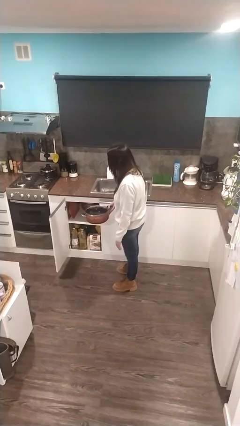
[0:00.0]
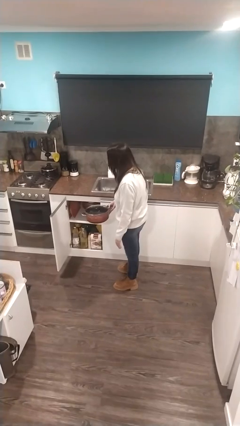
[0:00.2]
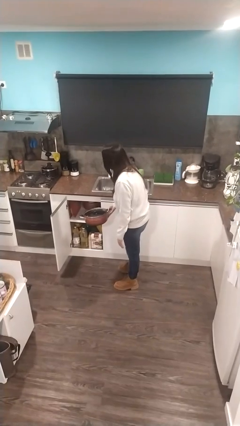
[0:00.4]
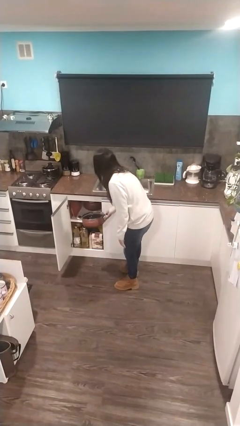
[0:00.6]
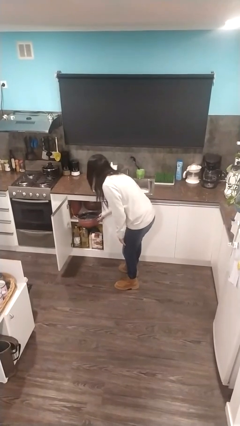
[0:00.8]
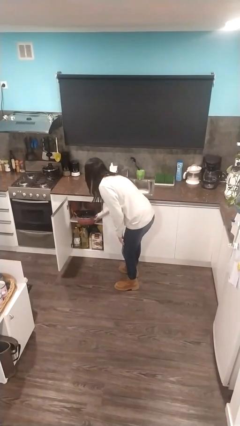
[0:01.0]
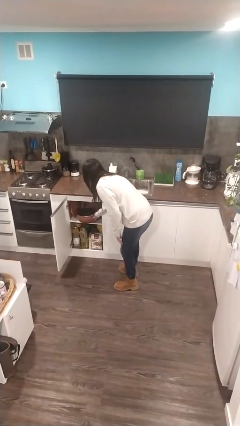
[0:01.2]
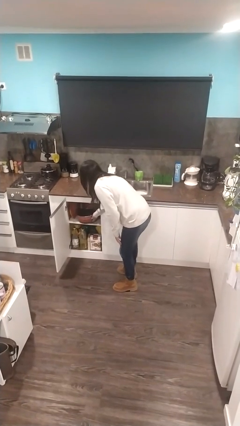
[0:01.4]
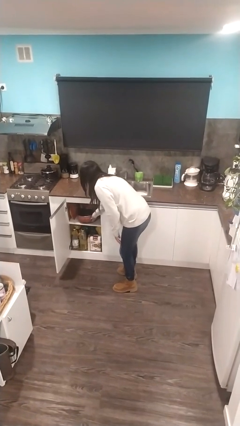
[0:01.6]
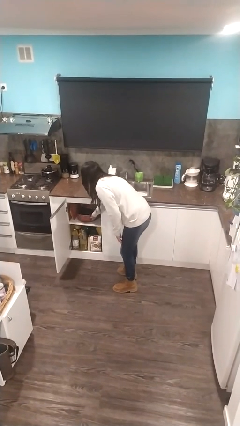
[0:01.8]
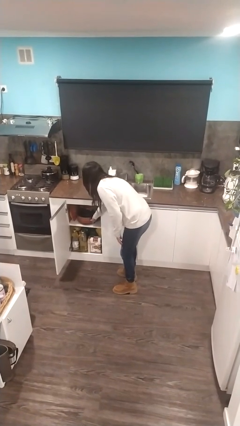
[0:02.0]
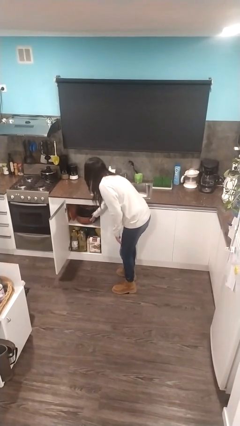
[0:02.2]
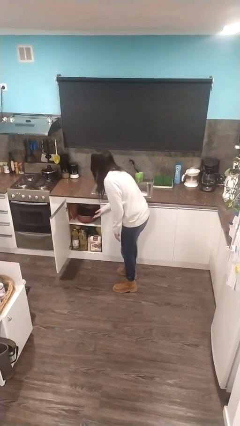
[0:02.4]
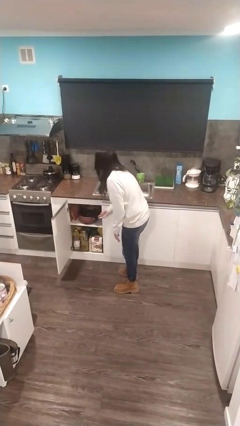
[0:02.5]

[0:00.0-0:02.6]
person puts down object into cabinet

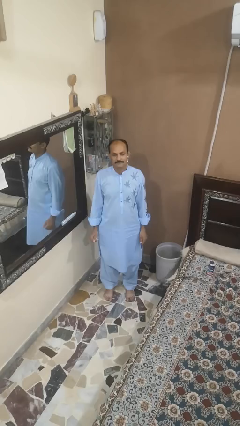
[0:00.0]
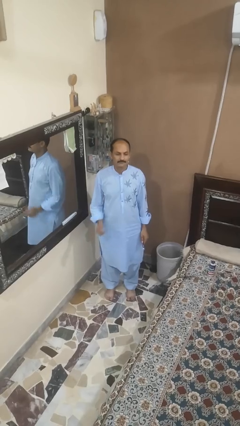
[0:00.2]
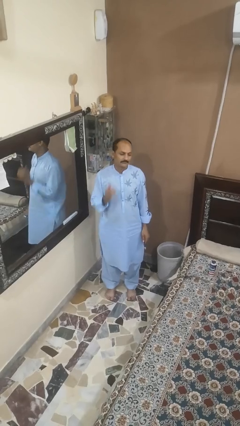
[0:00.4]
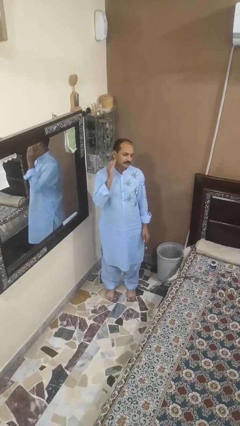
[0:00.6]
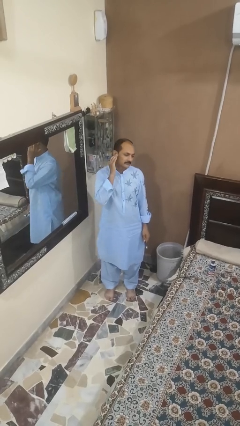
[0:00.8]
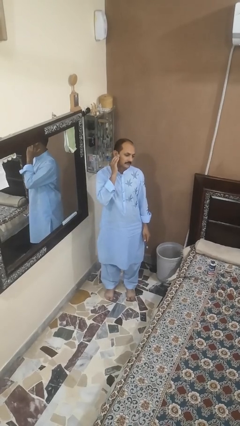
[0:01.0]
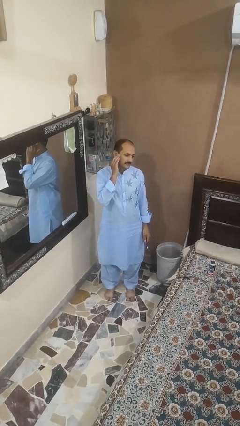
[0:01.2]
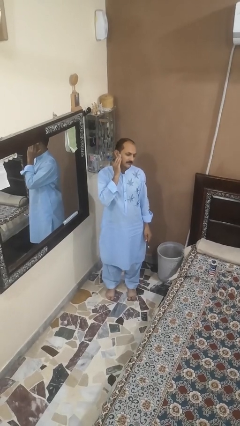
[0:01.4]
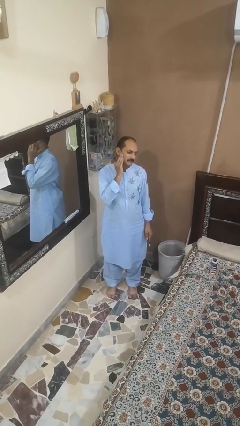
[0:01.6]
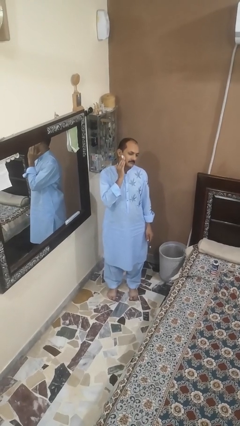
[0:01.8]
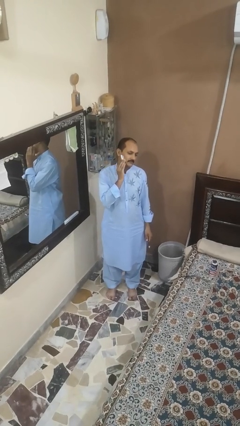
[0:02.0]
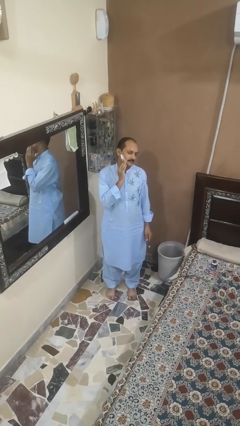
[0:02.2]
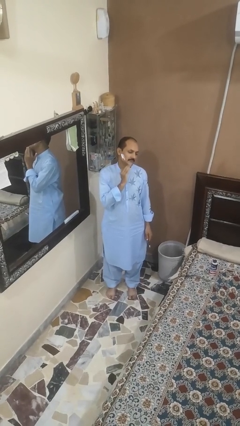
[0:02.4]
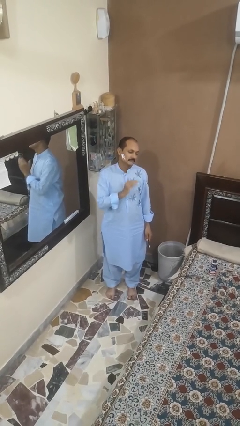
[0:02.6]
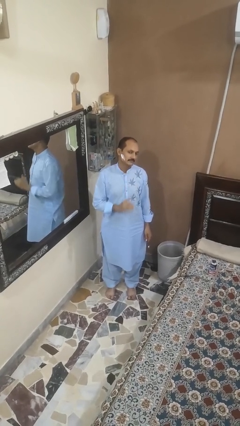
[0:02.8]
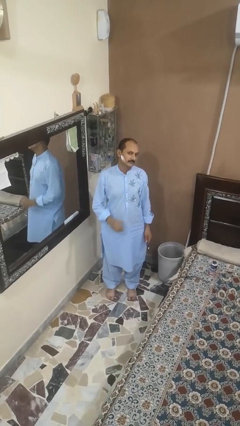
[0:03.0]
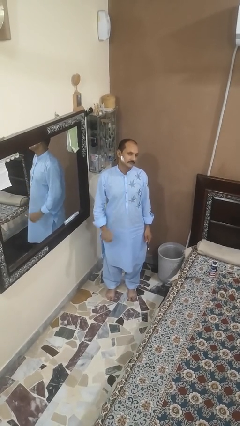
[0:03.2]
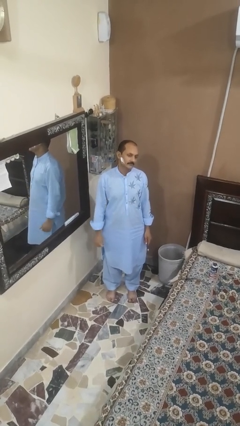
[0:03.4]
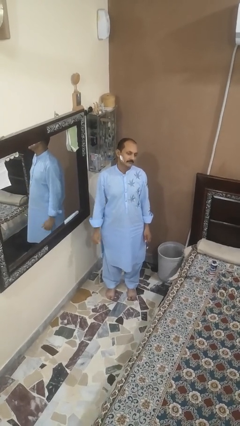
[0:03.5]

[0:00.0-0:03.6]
person applies shaving cream

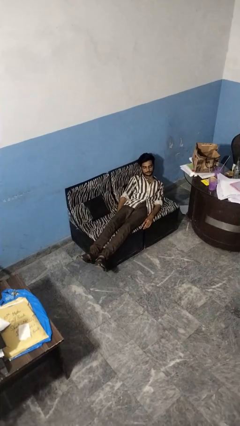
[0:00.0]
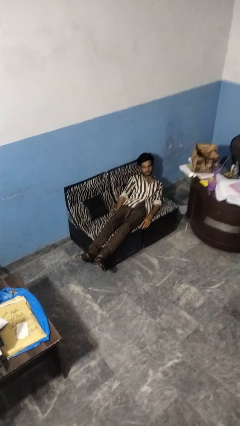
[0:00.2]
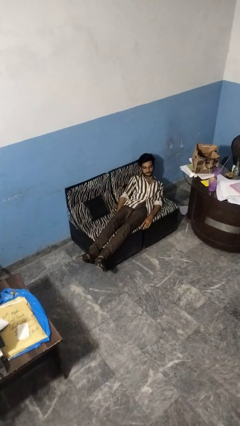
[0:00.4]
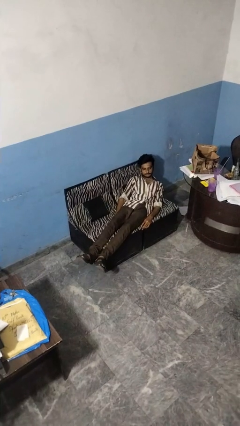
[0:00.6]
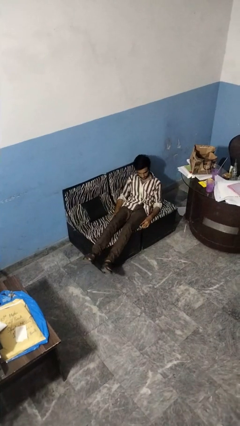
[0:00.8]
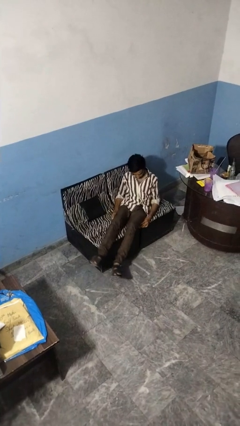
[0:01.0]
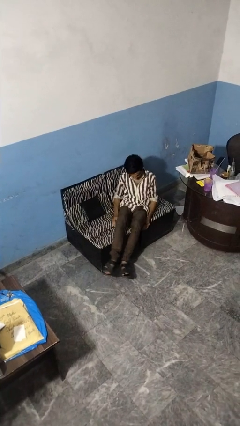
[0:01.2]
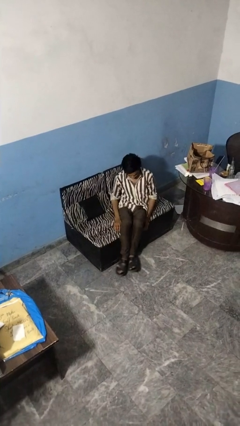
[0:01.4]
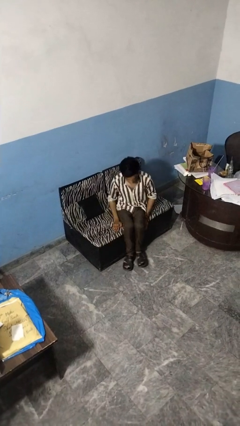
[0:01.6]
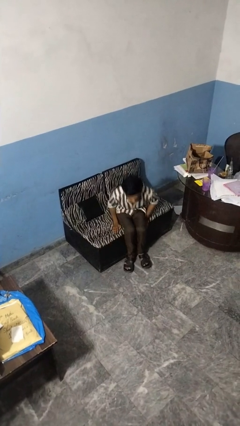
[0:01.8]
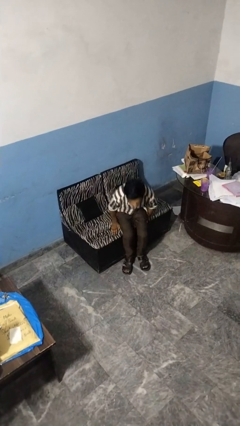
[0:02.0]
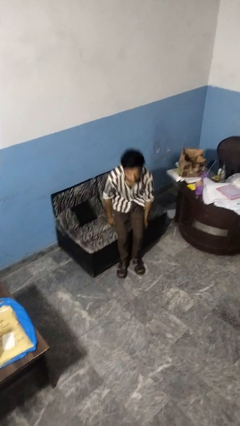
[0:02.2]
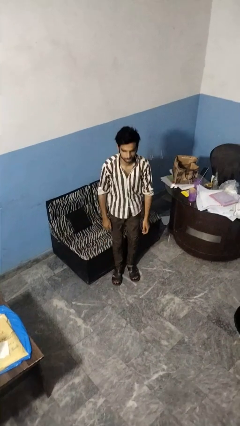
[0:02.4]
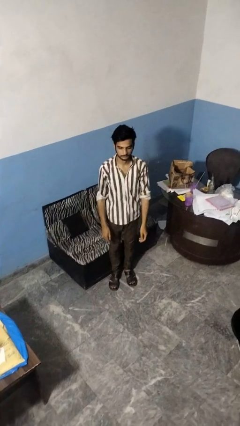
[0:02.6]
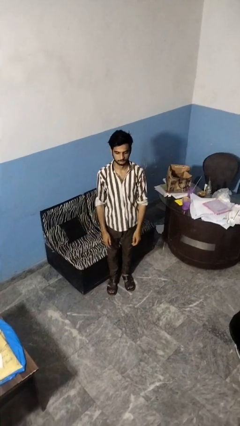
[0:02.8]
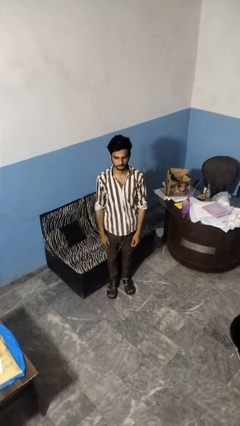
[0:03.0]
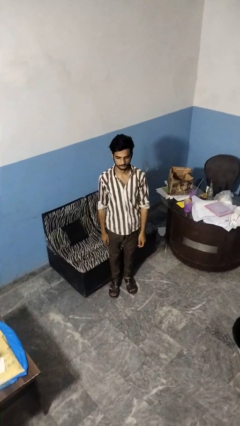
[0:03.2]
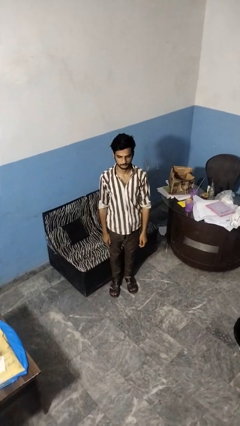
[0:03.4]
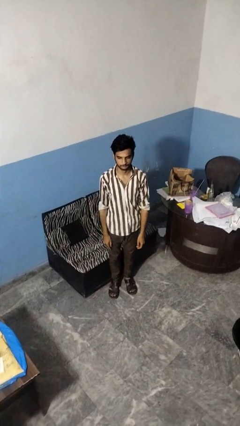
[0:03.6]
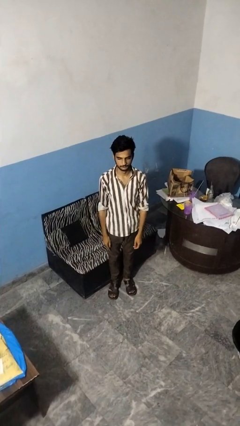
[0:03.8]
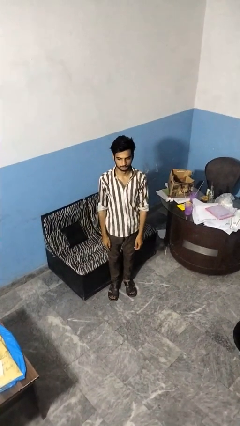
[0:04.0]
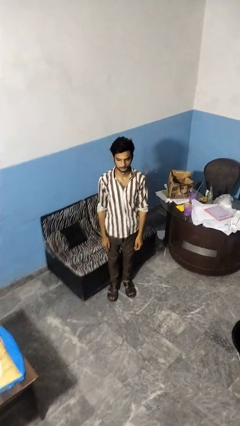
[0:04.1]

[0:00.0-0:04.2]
person stands up

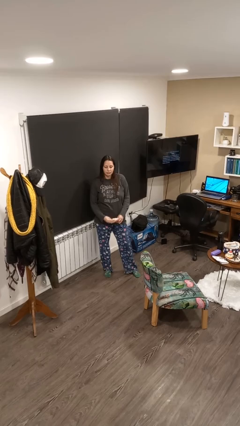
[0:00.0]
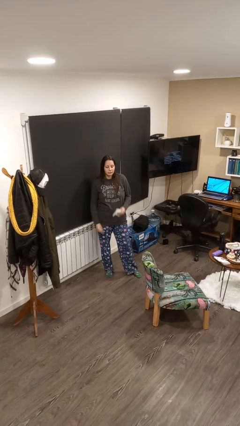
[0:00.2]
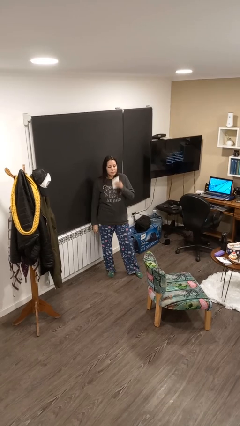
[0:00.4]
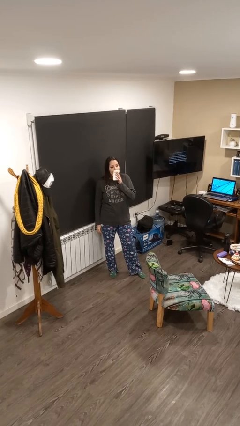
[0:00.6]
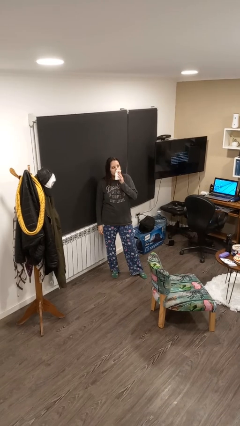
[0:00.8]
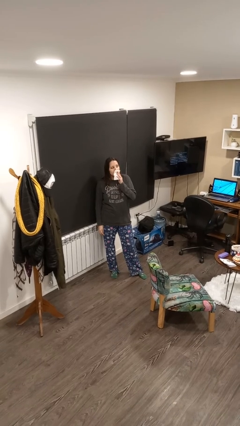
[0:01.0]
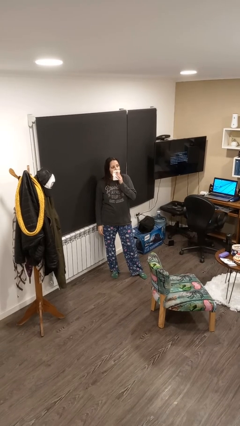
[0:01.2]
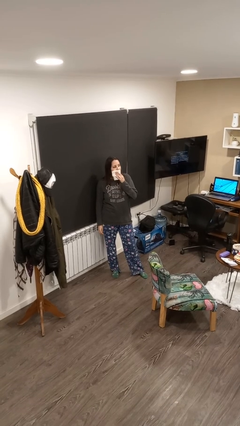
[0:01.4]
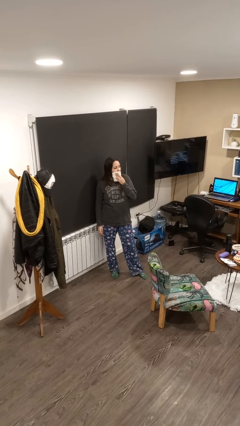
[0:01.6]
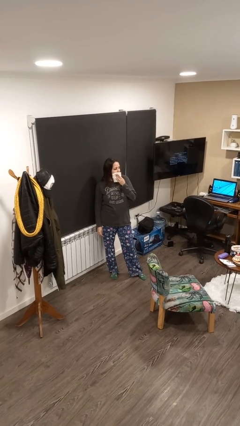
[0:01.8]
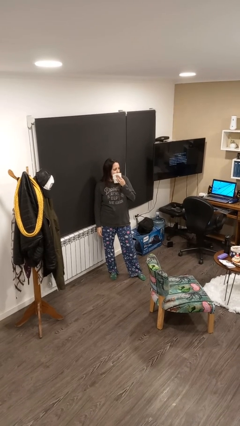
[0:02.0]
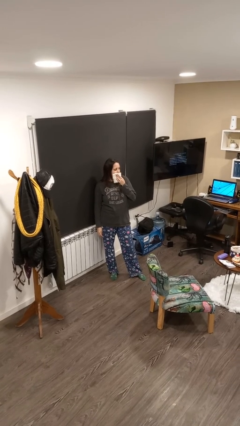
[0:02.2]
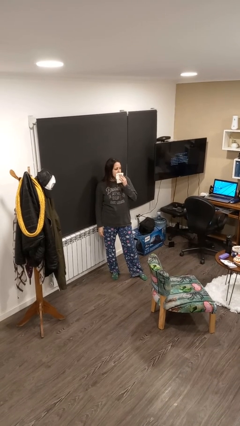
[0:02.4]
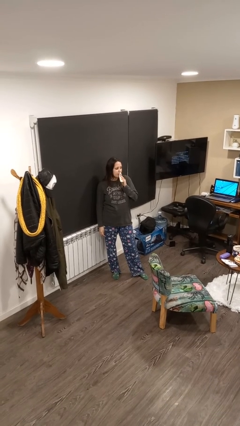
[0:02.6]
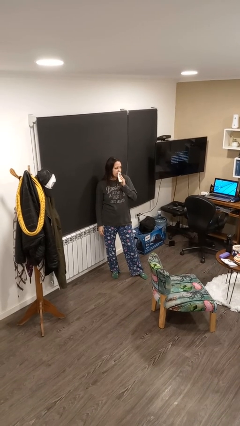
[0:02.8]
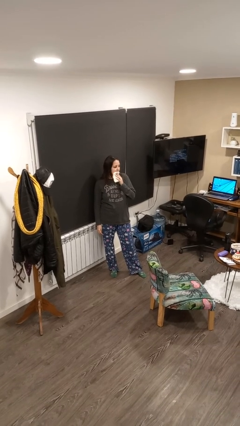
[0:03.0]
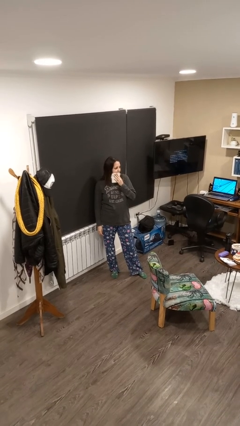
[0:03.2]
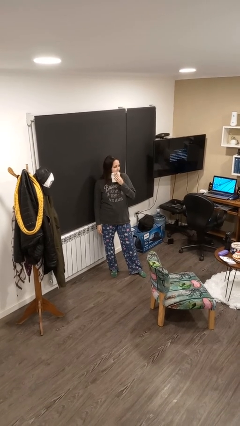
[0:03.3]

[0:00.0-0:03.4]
person wipes mouth with napkin

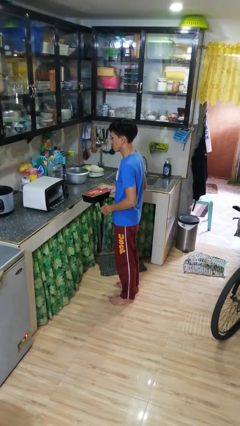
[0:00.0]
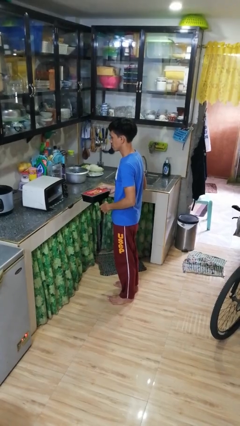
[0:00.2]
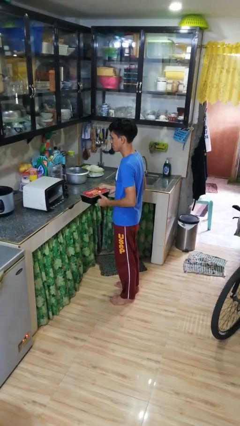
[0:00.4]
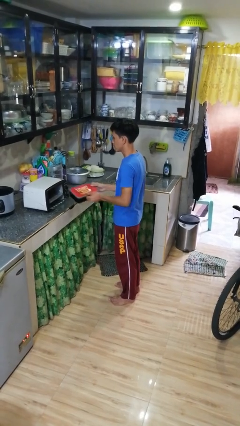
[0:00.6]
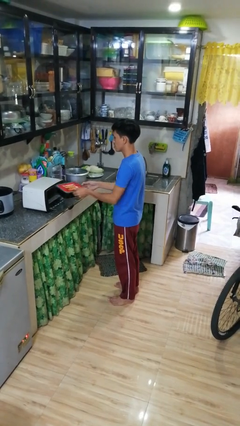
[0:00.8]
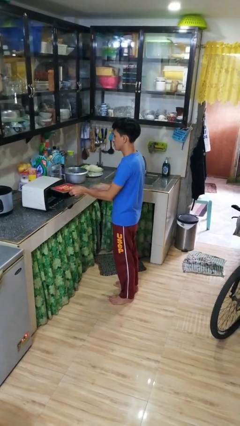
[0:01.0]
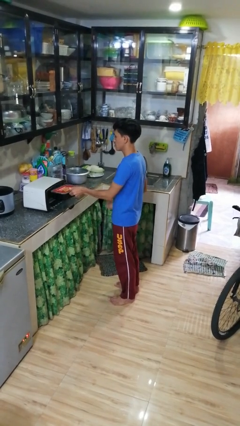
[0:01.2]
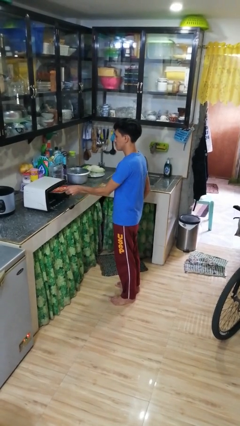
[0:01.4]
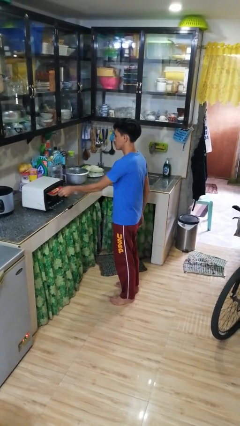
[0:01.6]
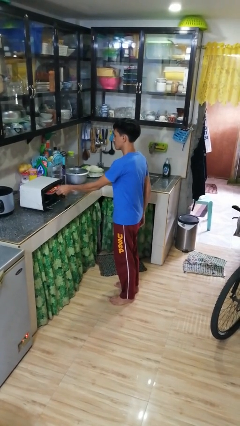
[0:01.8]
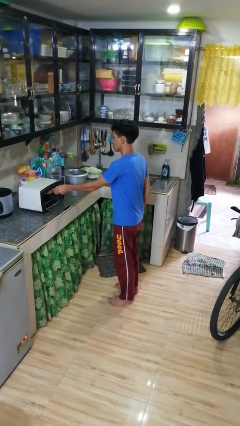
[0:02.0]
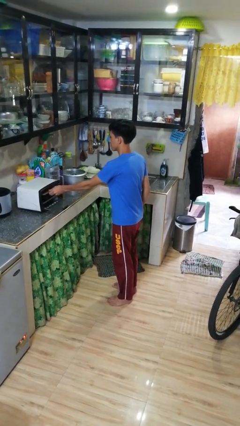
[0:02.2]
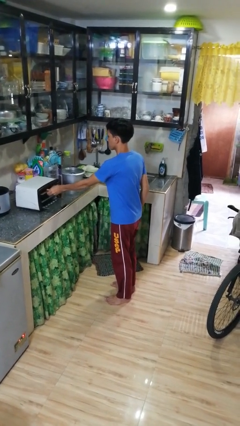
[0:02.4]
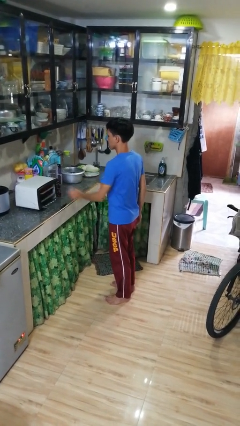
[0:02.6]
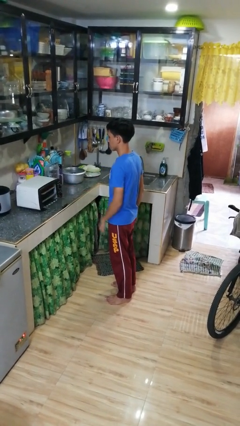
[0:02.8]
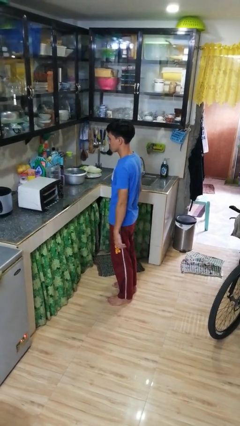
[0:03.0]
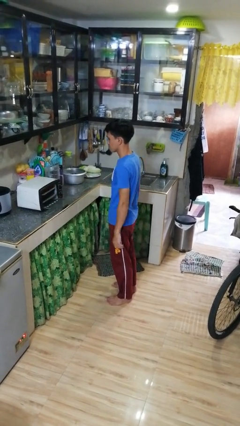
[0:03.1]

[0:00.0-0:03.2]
person puts object into microwave

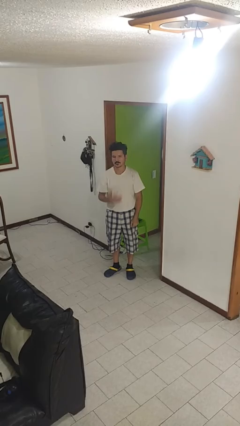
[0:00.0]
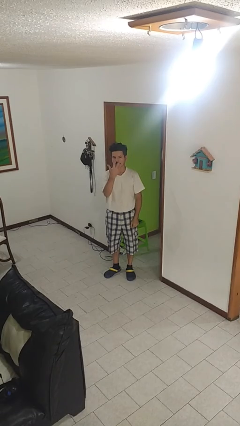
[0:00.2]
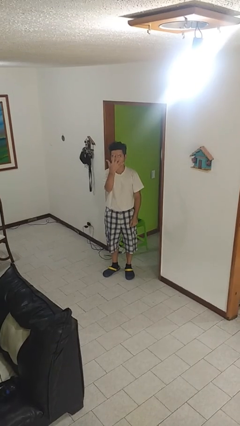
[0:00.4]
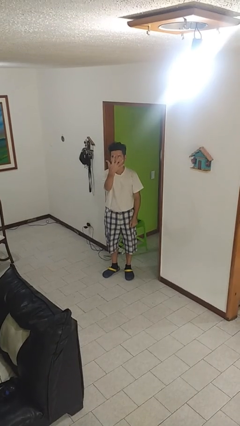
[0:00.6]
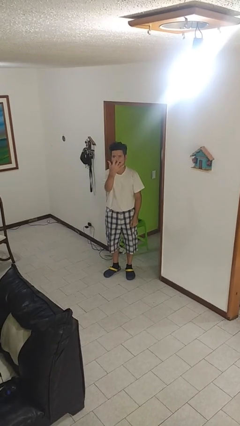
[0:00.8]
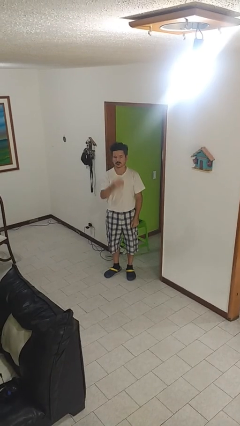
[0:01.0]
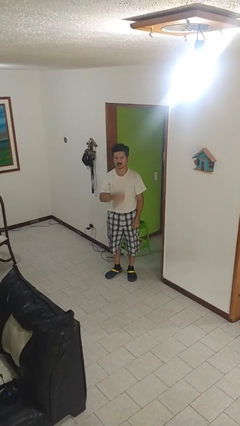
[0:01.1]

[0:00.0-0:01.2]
person gestures number five
